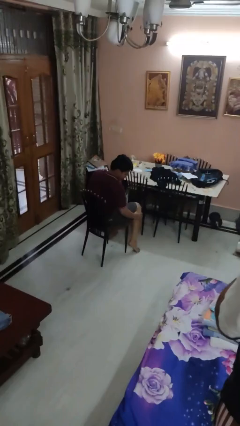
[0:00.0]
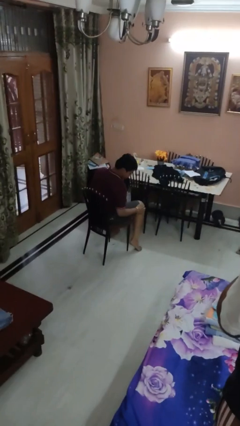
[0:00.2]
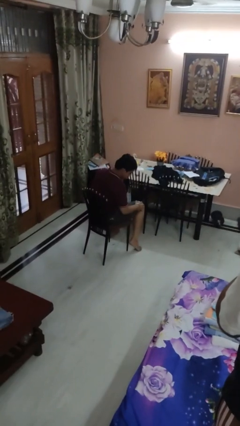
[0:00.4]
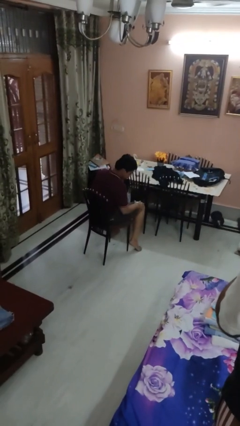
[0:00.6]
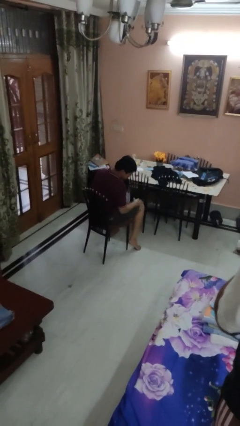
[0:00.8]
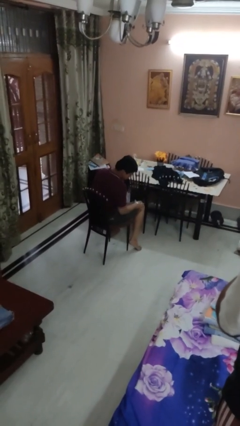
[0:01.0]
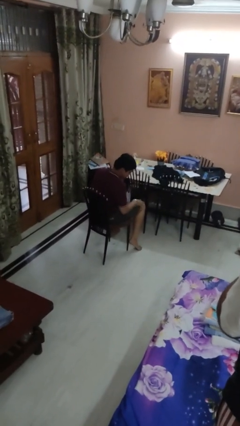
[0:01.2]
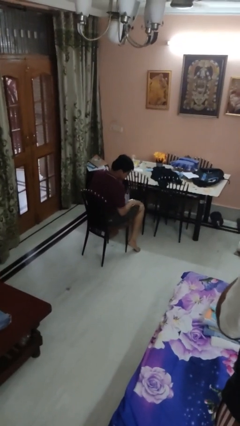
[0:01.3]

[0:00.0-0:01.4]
person swats bug

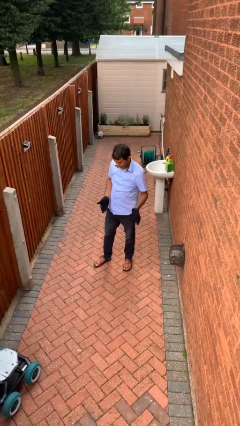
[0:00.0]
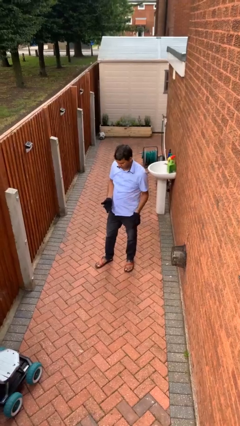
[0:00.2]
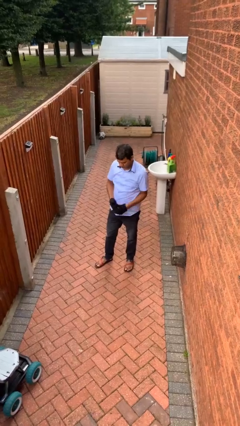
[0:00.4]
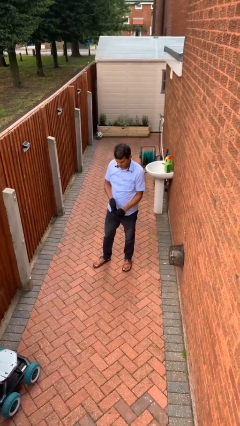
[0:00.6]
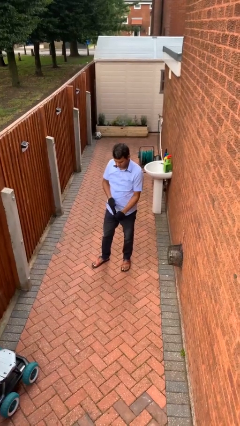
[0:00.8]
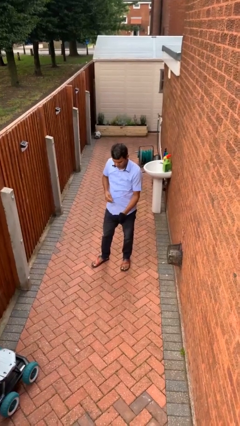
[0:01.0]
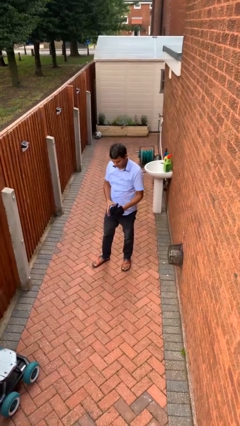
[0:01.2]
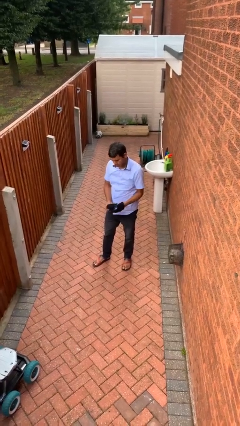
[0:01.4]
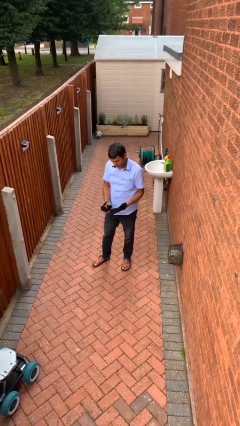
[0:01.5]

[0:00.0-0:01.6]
person takes off gloves

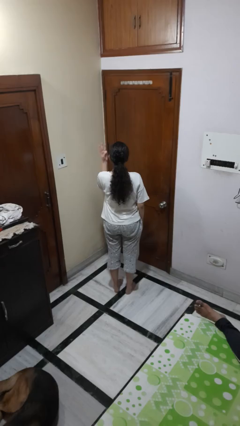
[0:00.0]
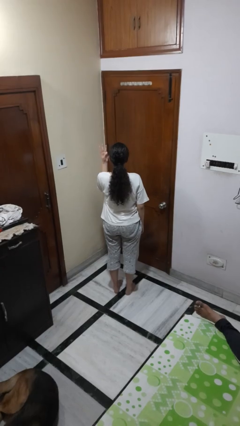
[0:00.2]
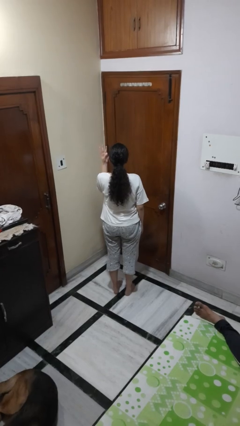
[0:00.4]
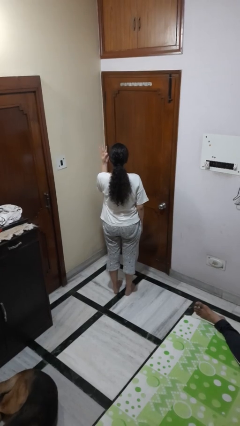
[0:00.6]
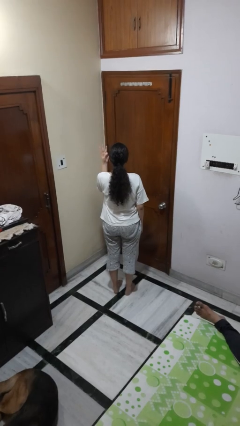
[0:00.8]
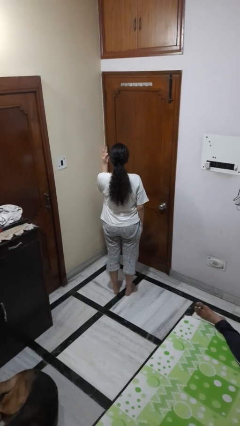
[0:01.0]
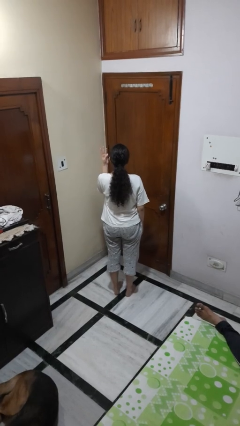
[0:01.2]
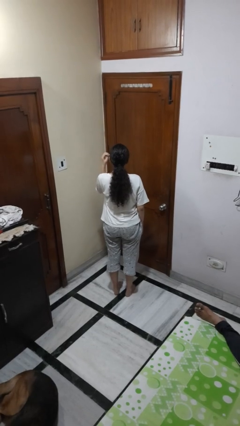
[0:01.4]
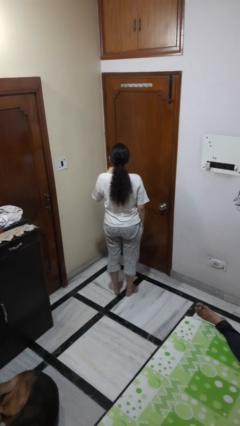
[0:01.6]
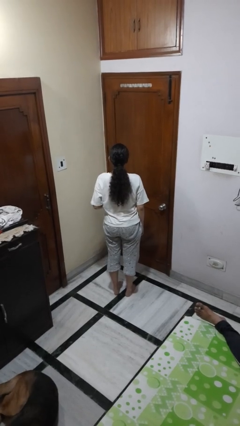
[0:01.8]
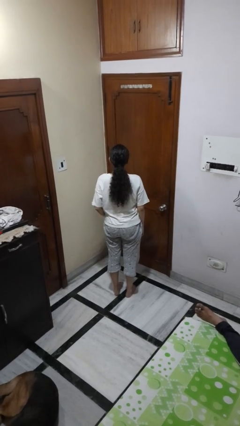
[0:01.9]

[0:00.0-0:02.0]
person gestures number three

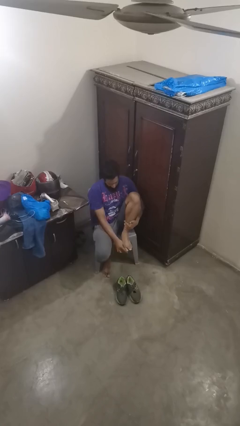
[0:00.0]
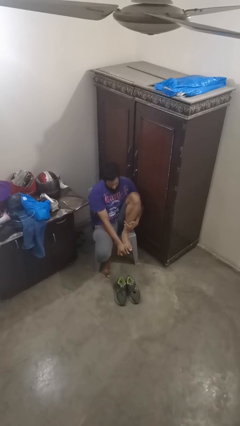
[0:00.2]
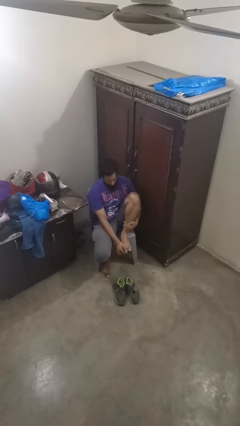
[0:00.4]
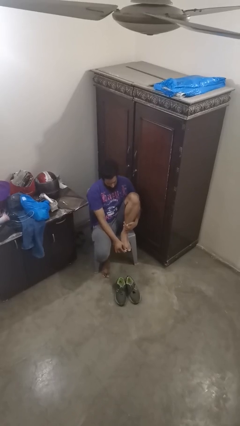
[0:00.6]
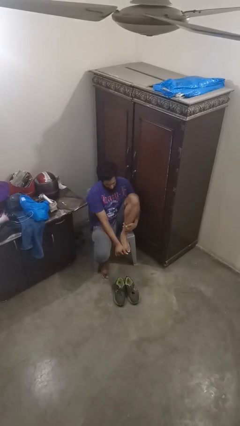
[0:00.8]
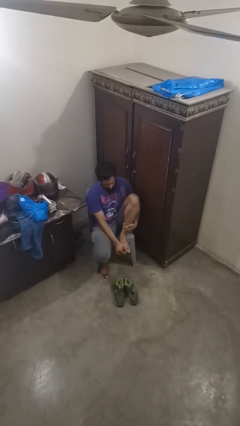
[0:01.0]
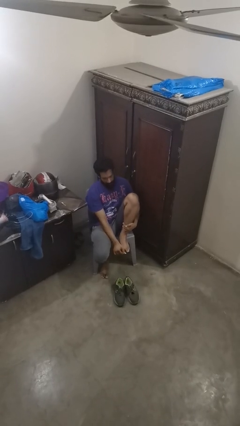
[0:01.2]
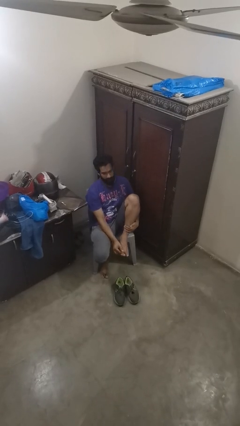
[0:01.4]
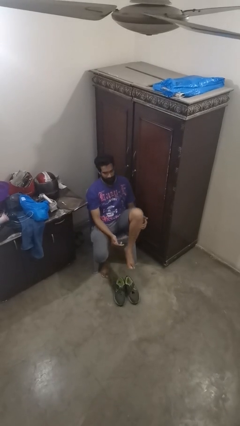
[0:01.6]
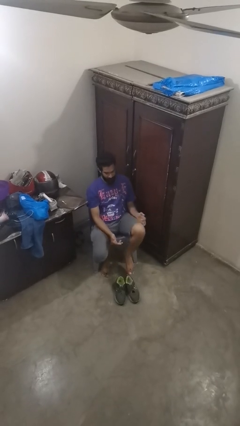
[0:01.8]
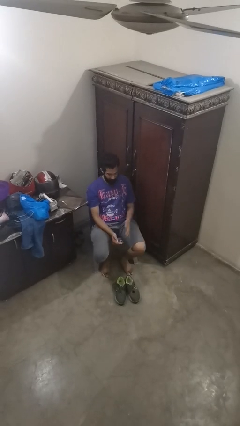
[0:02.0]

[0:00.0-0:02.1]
person rubs foot

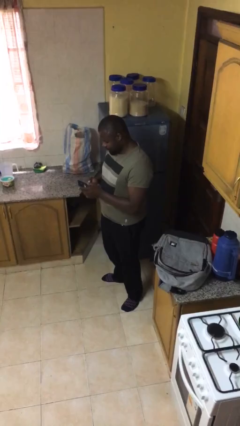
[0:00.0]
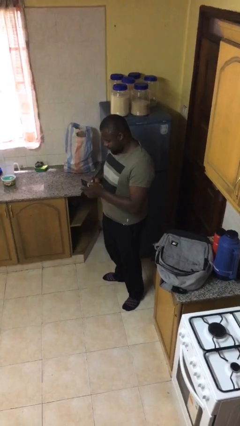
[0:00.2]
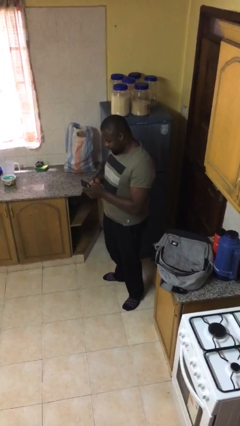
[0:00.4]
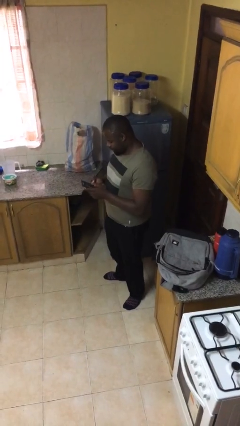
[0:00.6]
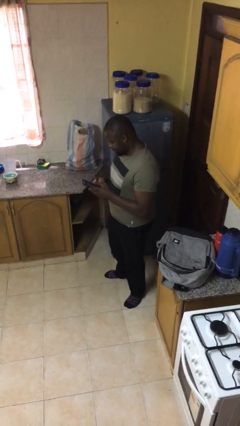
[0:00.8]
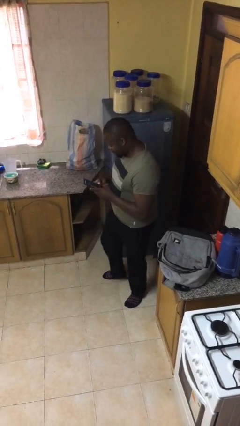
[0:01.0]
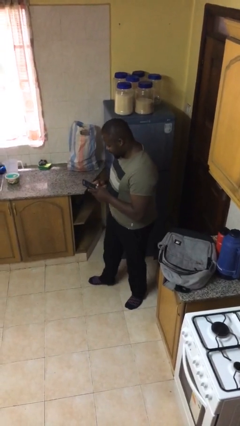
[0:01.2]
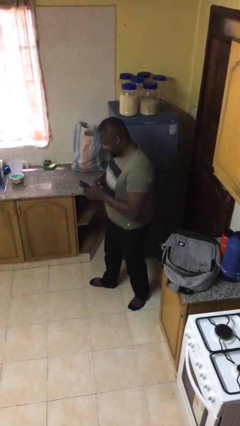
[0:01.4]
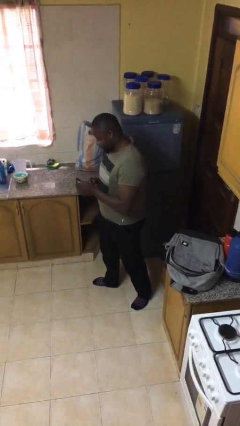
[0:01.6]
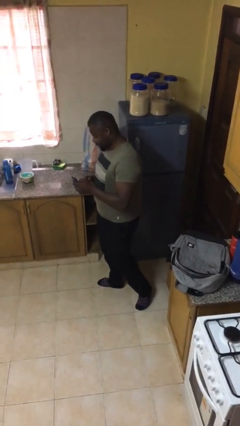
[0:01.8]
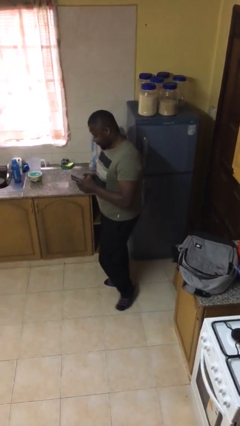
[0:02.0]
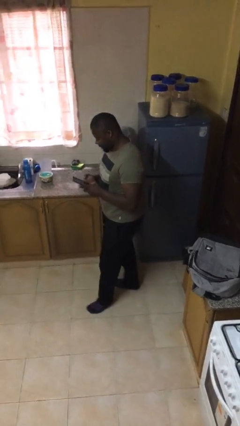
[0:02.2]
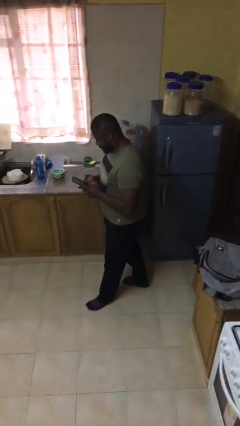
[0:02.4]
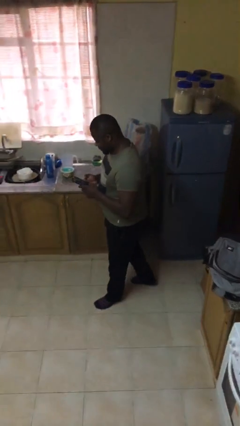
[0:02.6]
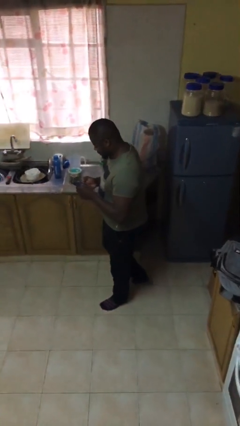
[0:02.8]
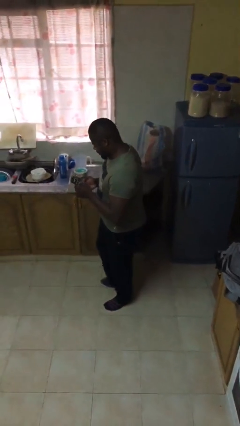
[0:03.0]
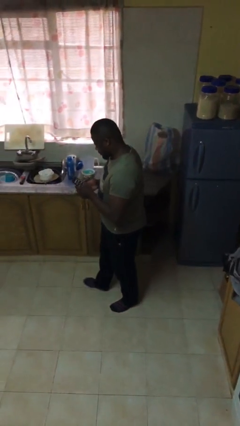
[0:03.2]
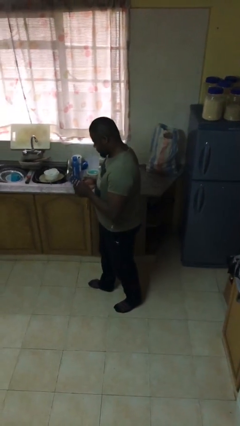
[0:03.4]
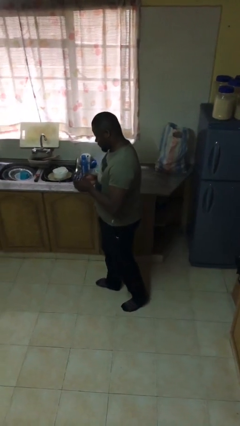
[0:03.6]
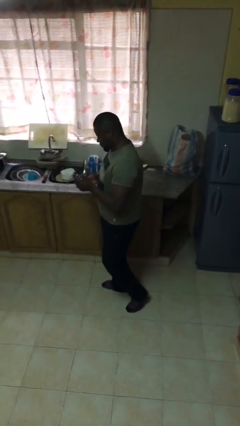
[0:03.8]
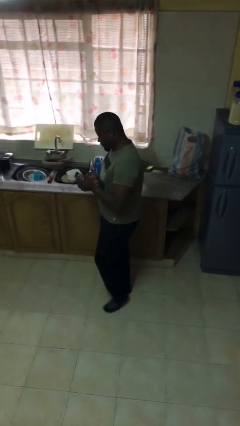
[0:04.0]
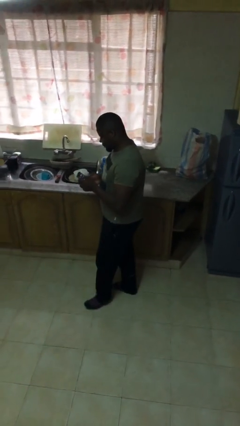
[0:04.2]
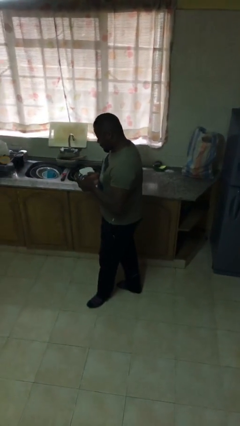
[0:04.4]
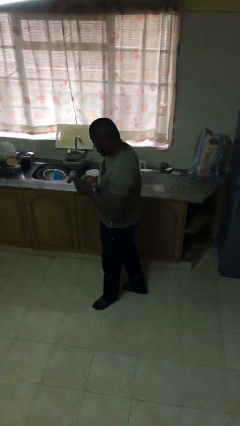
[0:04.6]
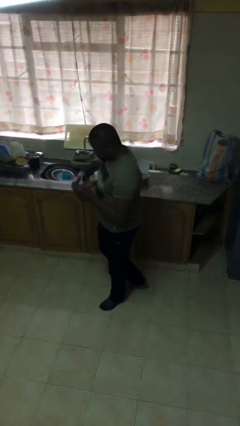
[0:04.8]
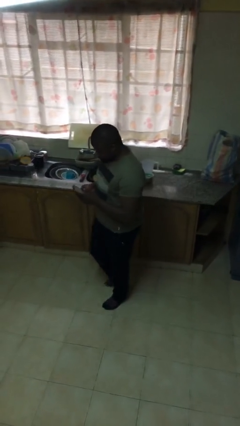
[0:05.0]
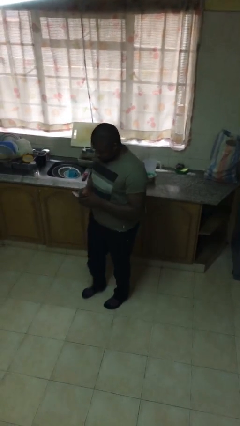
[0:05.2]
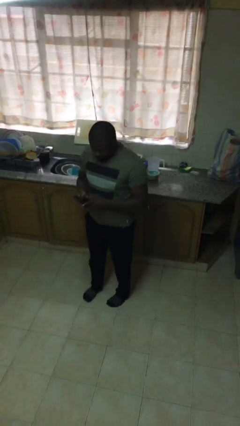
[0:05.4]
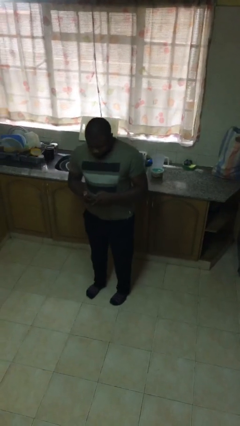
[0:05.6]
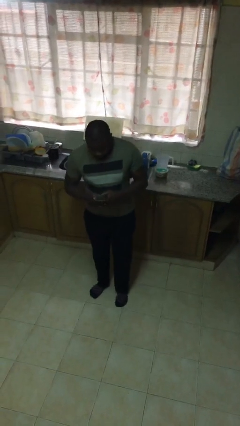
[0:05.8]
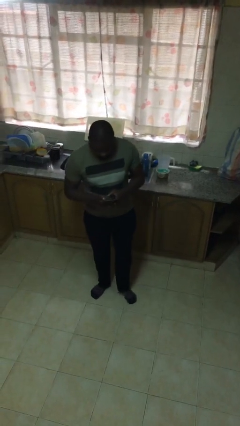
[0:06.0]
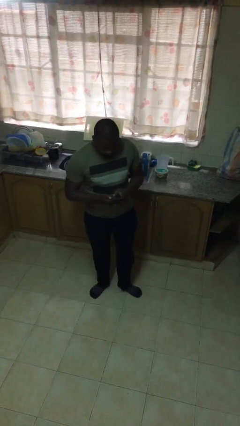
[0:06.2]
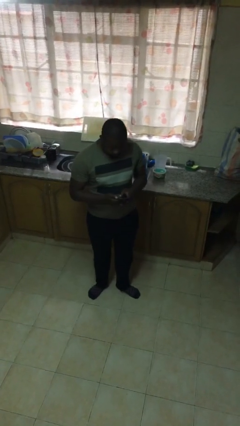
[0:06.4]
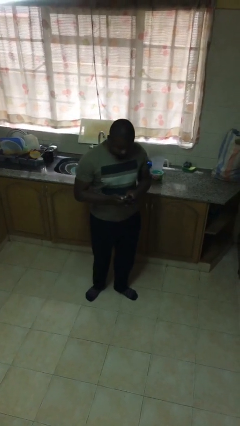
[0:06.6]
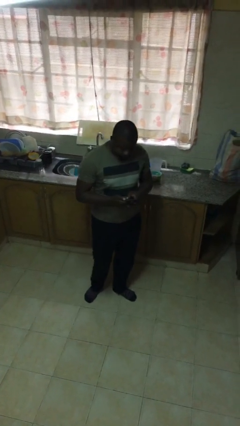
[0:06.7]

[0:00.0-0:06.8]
person texts on phone

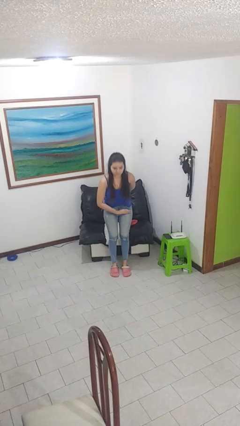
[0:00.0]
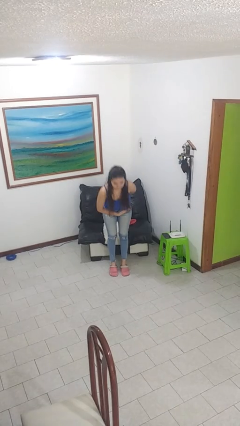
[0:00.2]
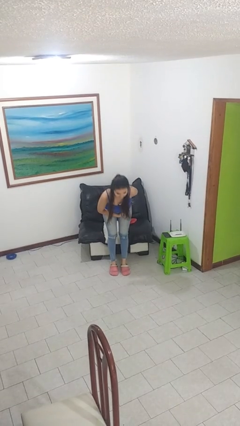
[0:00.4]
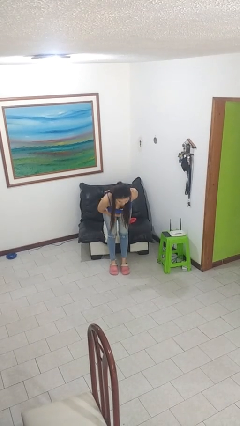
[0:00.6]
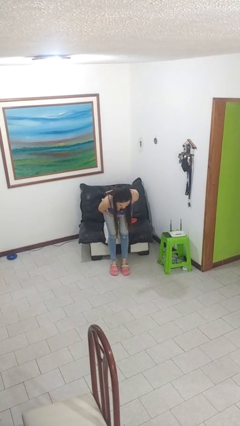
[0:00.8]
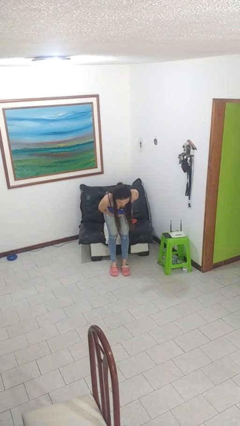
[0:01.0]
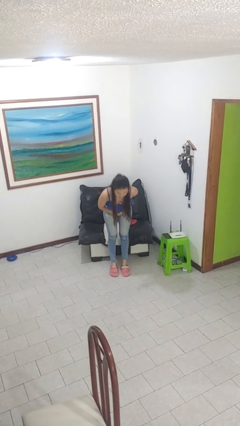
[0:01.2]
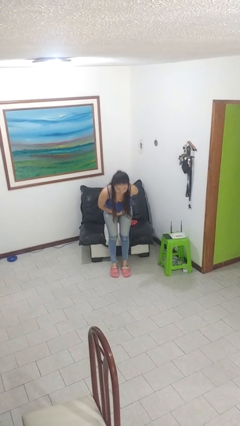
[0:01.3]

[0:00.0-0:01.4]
person bows

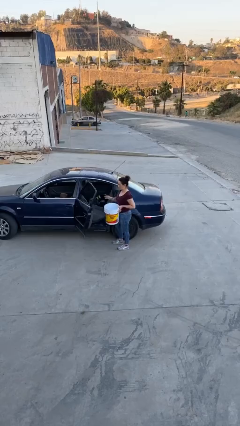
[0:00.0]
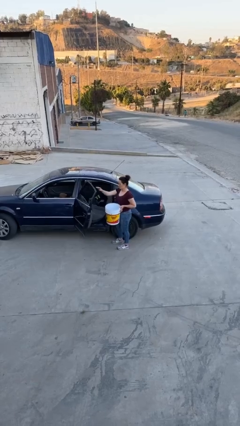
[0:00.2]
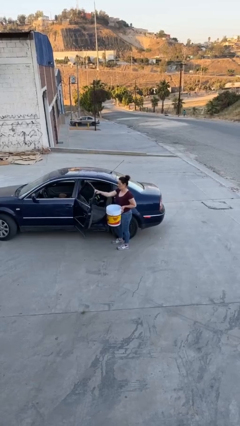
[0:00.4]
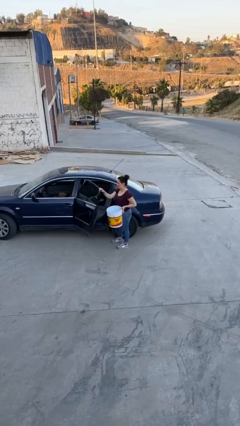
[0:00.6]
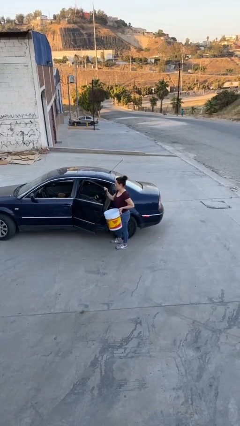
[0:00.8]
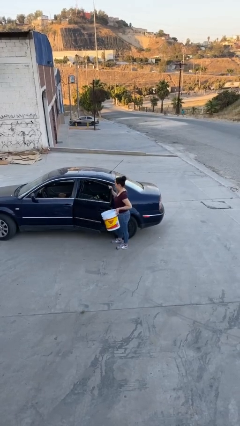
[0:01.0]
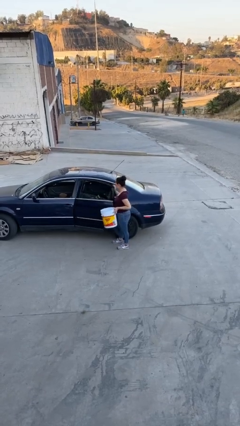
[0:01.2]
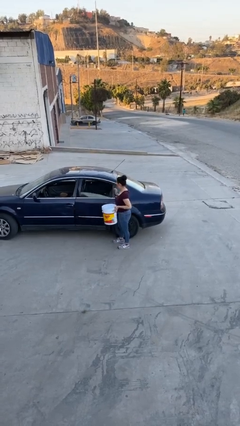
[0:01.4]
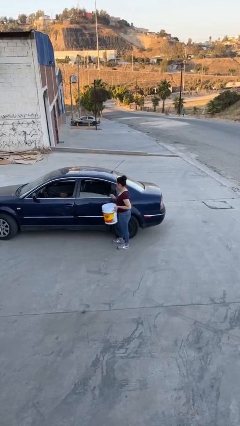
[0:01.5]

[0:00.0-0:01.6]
person closes car door
